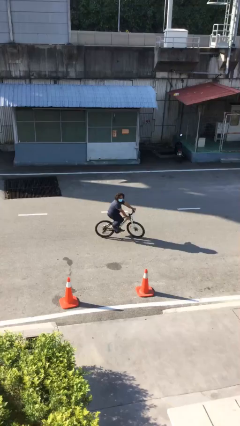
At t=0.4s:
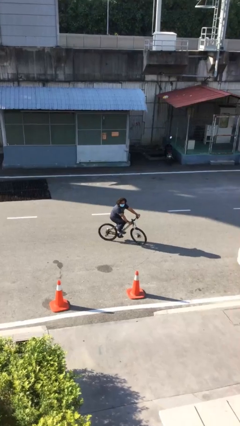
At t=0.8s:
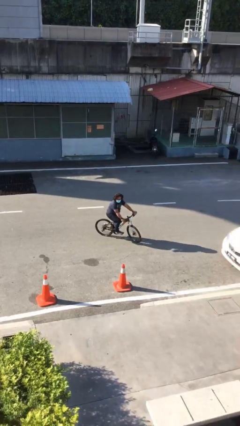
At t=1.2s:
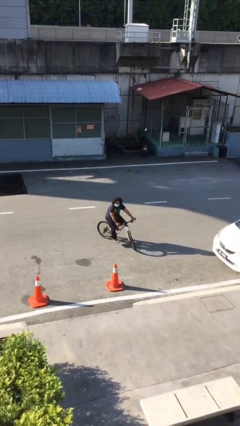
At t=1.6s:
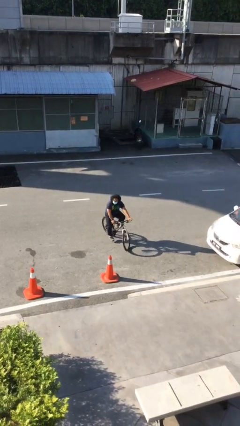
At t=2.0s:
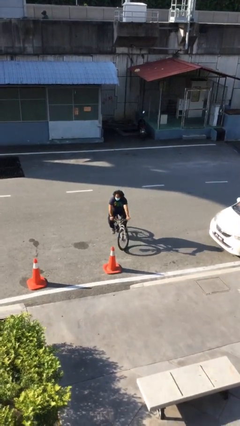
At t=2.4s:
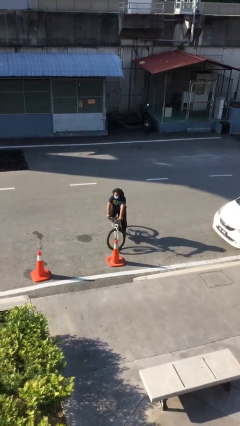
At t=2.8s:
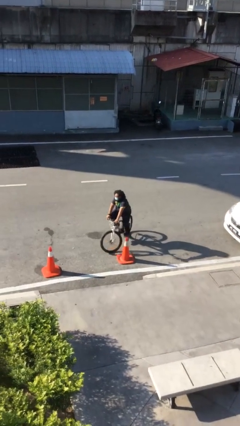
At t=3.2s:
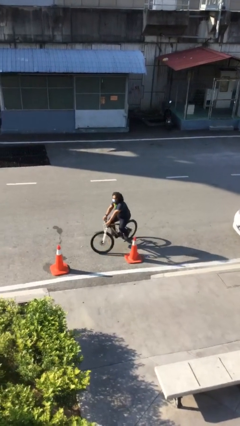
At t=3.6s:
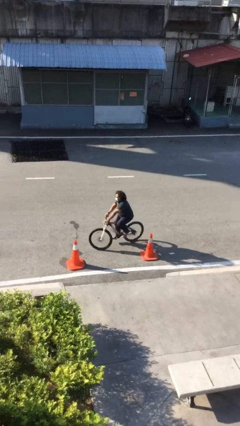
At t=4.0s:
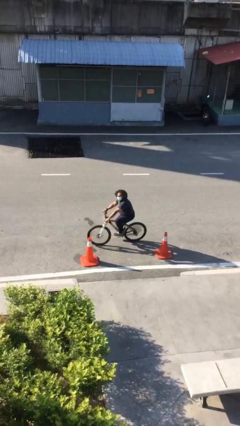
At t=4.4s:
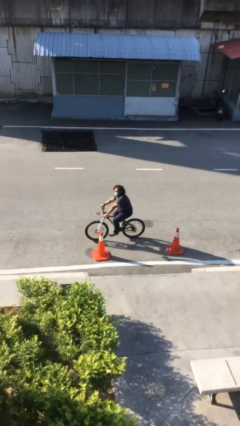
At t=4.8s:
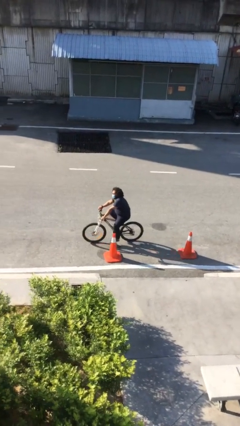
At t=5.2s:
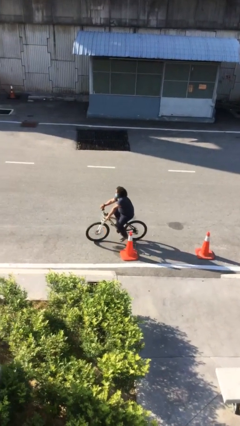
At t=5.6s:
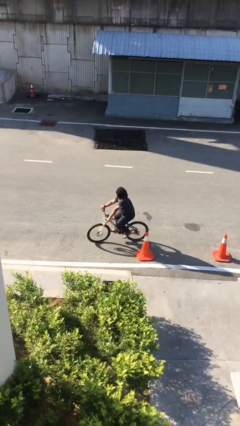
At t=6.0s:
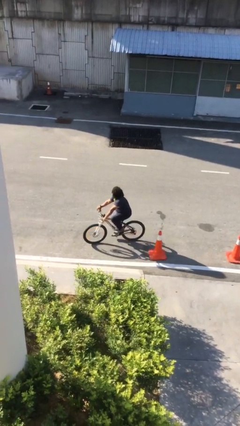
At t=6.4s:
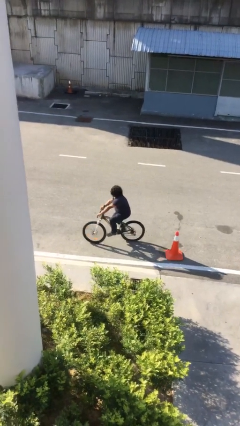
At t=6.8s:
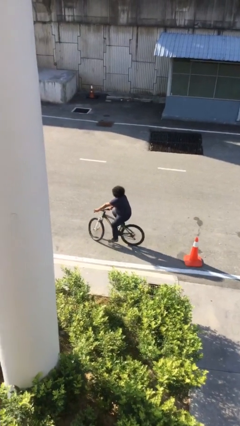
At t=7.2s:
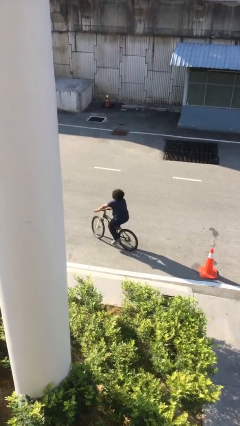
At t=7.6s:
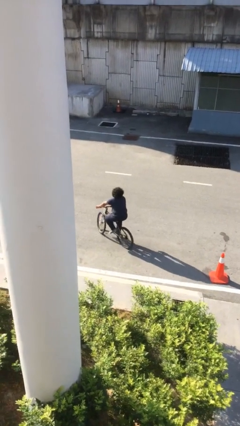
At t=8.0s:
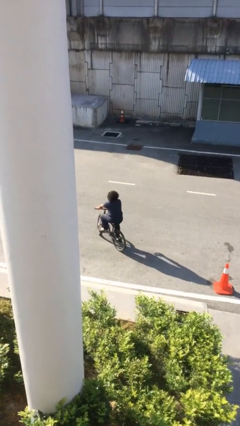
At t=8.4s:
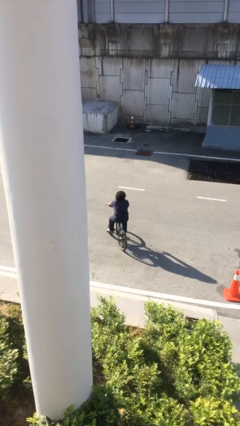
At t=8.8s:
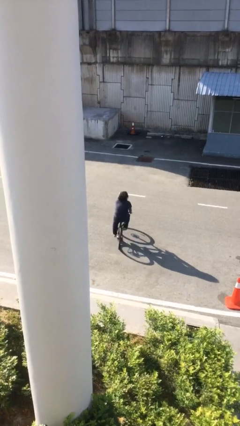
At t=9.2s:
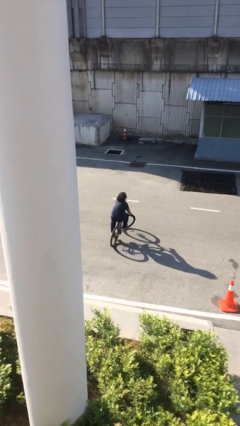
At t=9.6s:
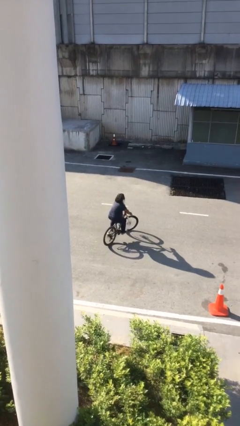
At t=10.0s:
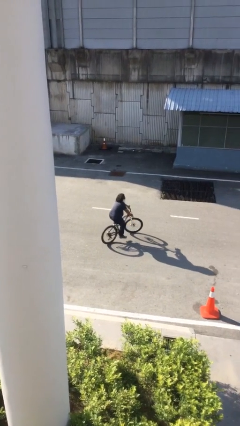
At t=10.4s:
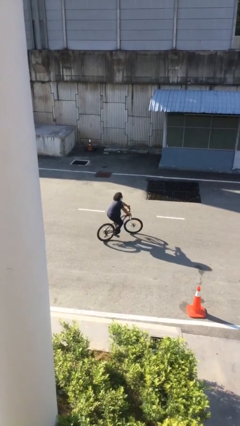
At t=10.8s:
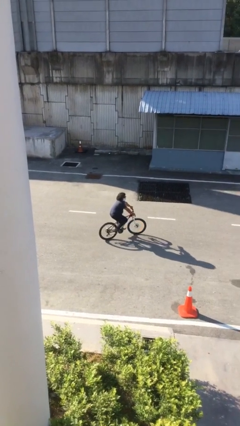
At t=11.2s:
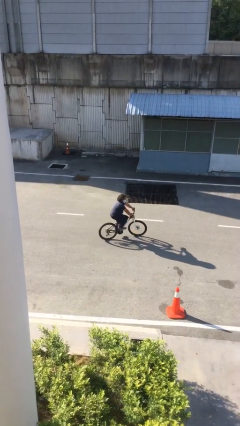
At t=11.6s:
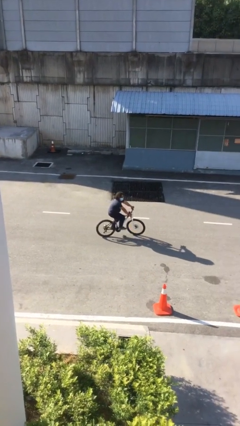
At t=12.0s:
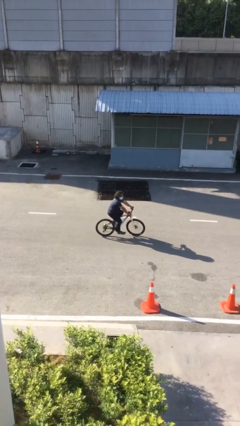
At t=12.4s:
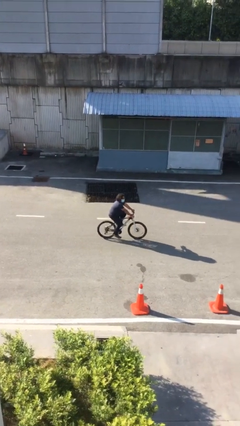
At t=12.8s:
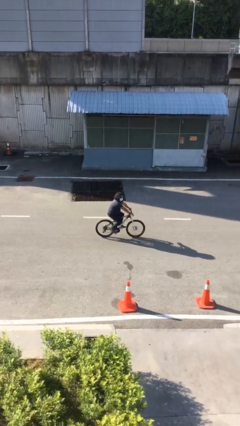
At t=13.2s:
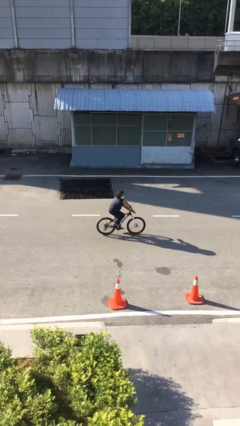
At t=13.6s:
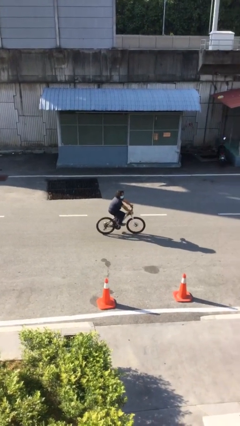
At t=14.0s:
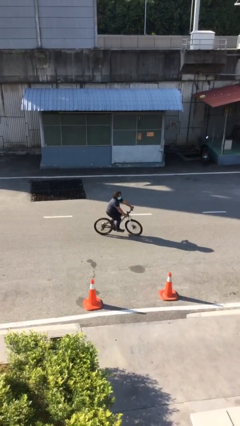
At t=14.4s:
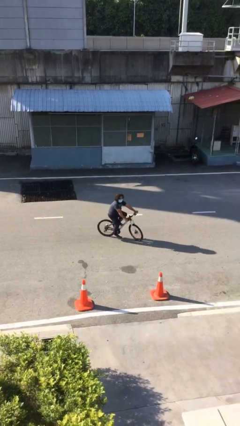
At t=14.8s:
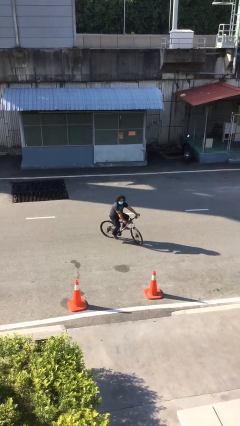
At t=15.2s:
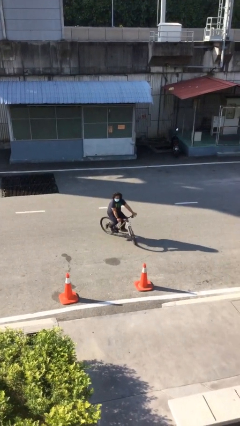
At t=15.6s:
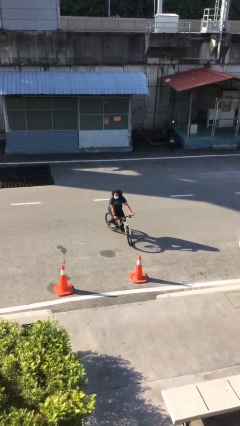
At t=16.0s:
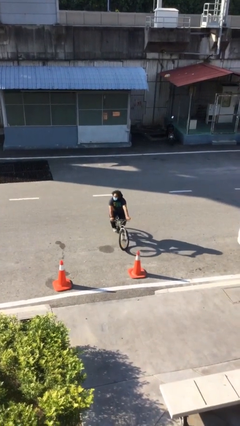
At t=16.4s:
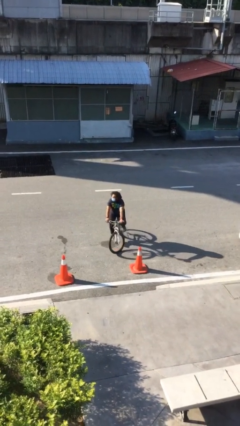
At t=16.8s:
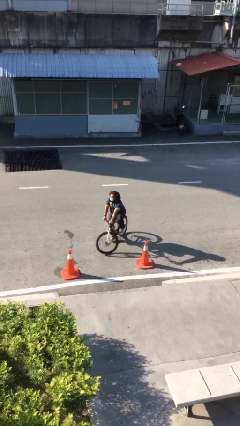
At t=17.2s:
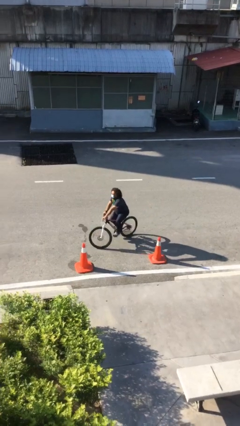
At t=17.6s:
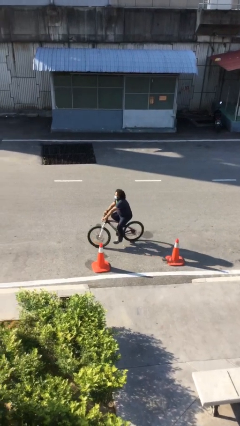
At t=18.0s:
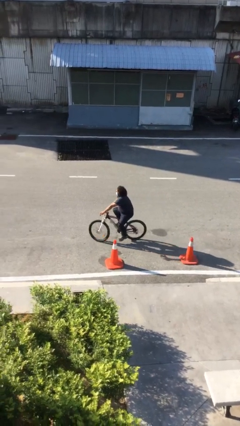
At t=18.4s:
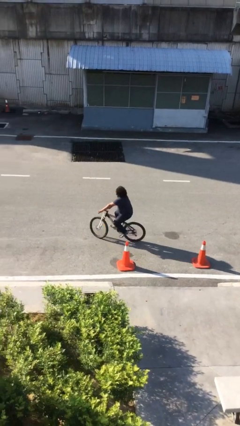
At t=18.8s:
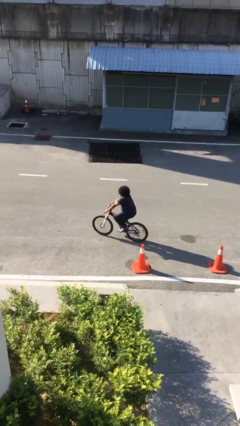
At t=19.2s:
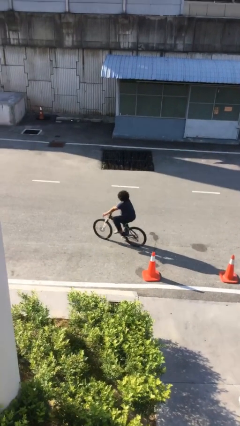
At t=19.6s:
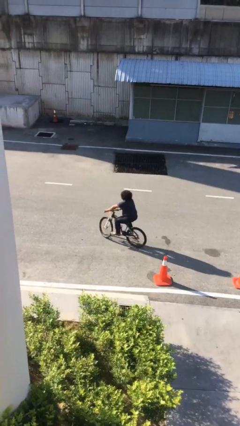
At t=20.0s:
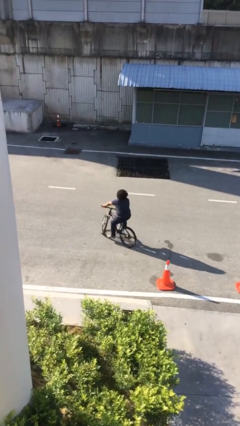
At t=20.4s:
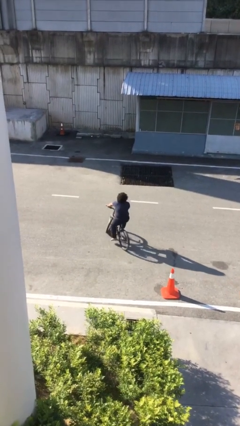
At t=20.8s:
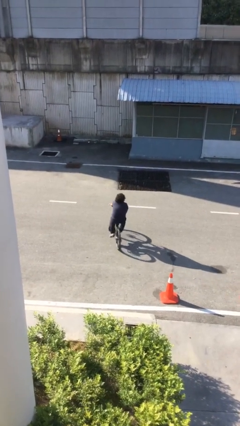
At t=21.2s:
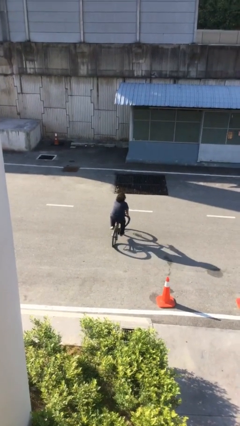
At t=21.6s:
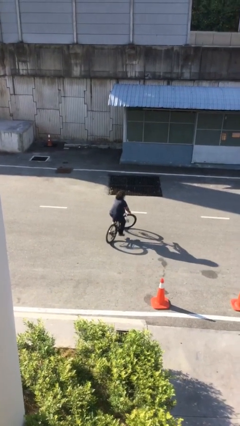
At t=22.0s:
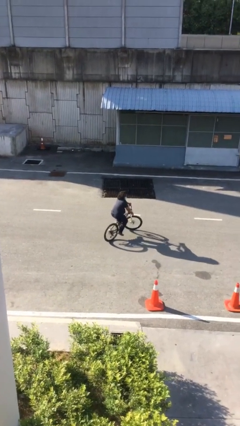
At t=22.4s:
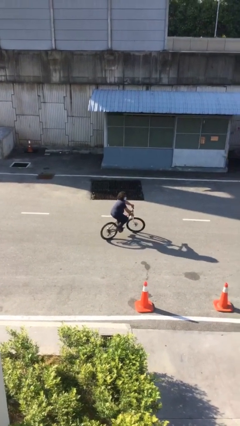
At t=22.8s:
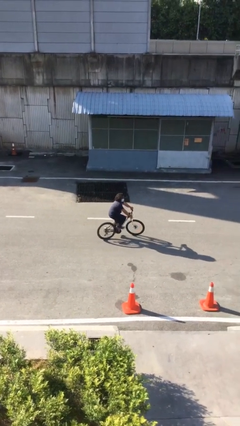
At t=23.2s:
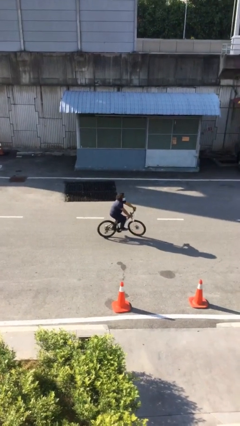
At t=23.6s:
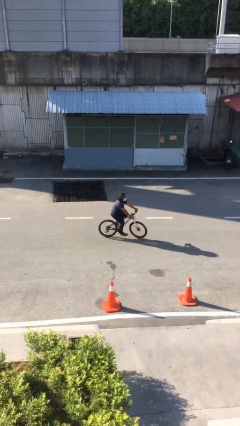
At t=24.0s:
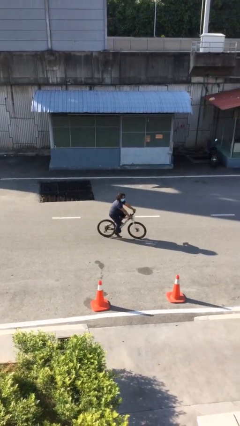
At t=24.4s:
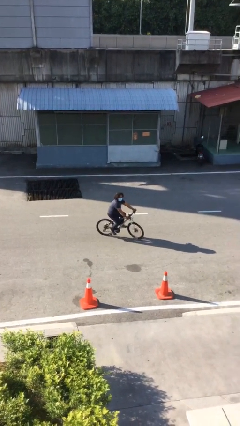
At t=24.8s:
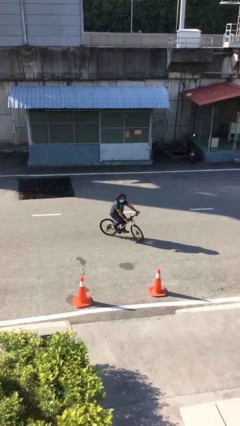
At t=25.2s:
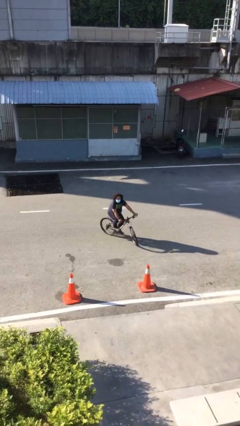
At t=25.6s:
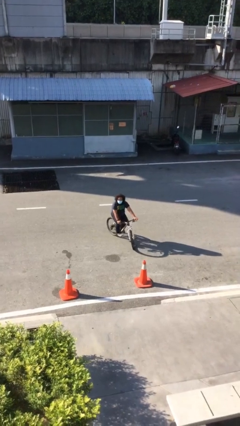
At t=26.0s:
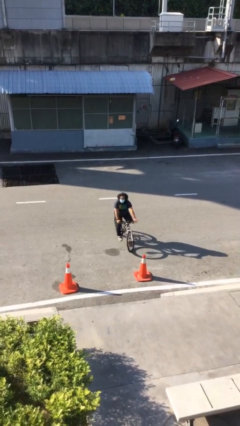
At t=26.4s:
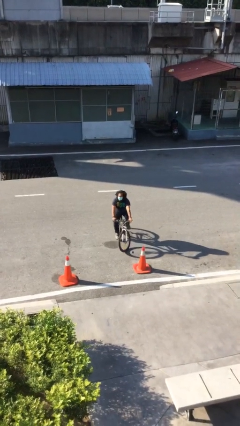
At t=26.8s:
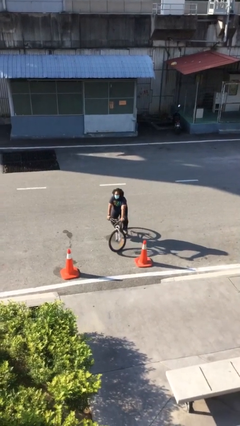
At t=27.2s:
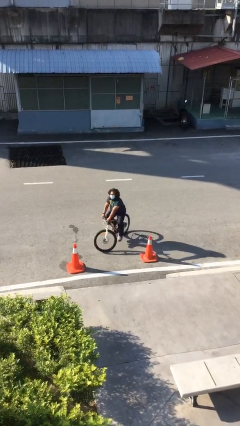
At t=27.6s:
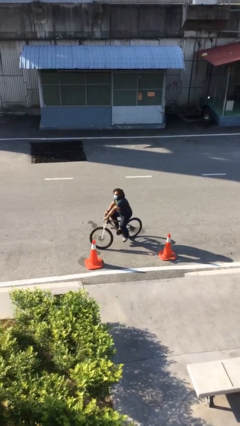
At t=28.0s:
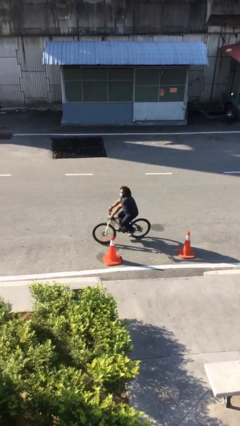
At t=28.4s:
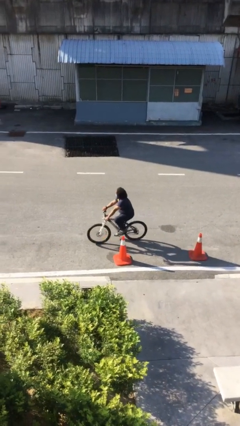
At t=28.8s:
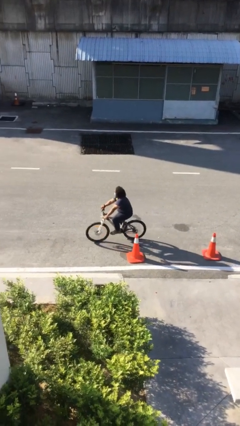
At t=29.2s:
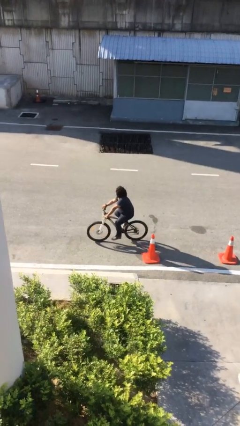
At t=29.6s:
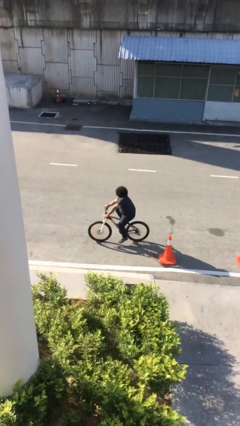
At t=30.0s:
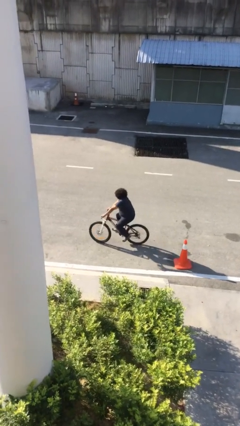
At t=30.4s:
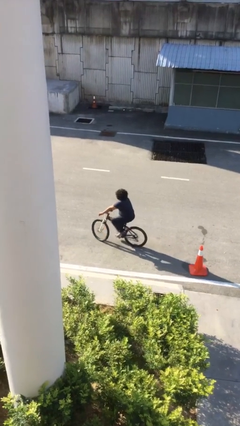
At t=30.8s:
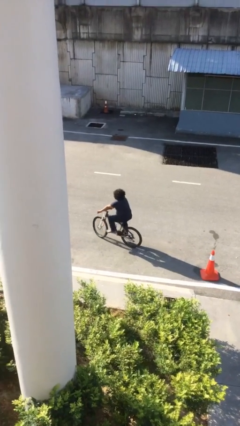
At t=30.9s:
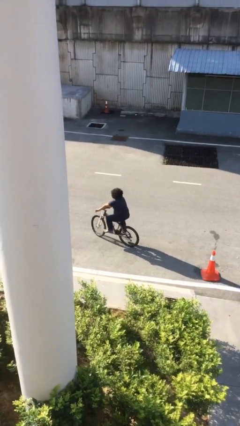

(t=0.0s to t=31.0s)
person rides bicycle

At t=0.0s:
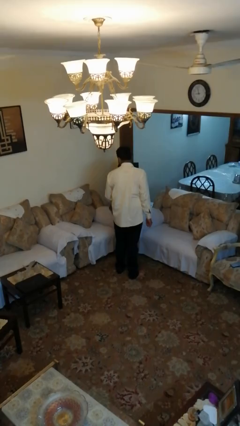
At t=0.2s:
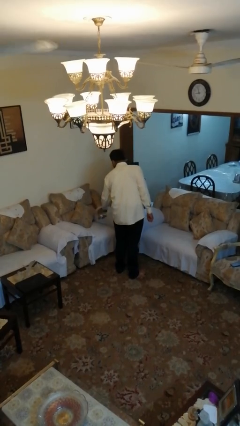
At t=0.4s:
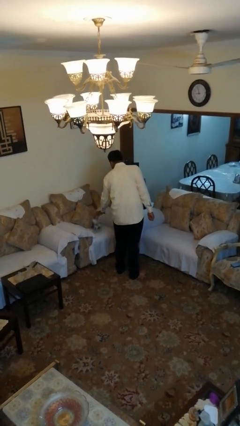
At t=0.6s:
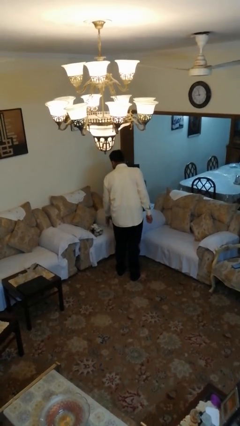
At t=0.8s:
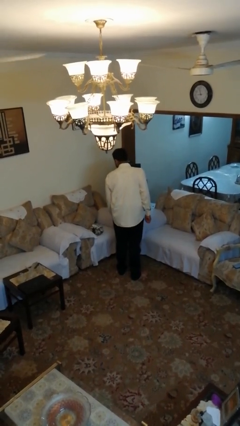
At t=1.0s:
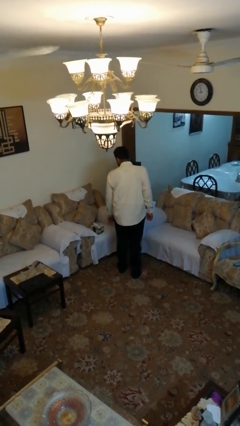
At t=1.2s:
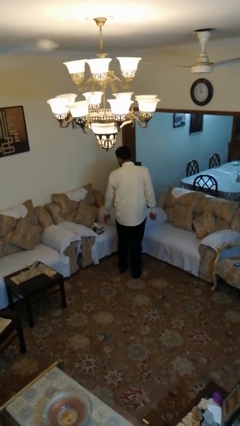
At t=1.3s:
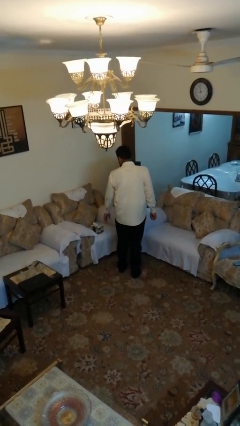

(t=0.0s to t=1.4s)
person puts down object on couch

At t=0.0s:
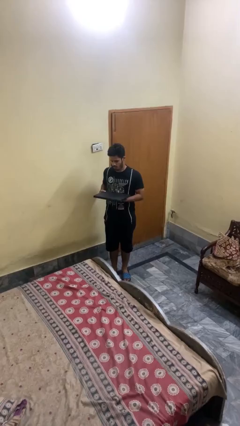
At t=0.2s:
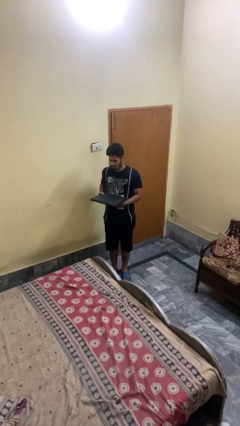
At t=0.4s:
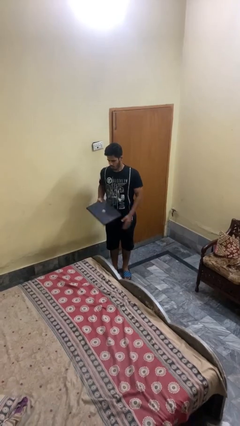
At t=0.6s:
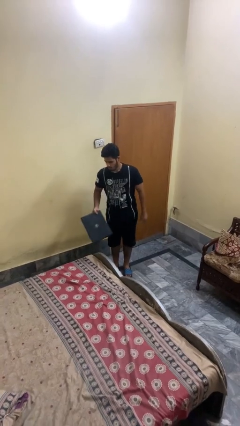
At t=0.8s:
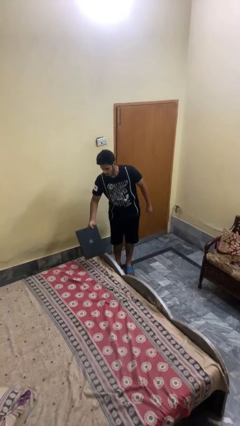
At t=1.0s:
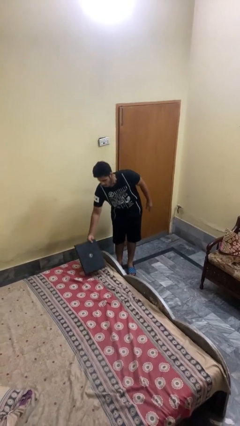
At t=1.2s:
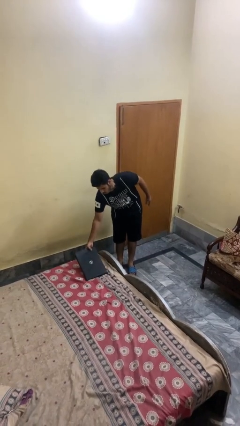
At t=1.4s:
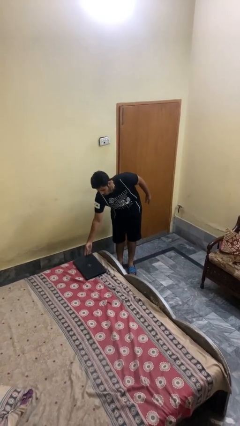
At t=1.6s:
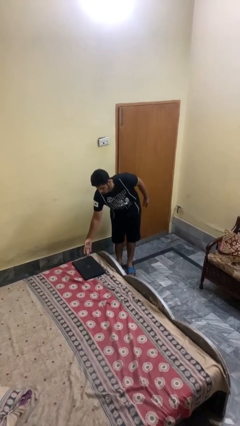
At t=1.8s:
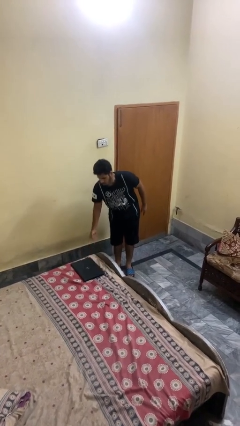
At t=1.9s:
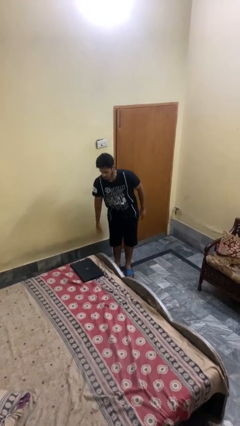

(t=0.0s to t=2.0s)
person puts down object on bed
